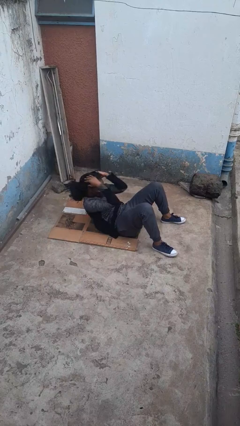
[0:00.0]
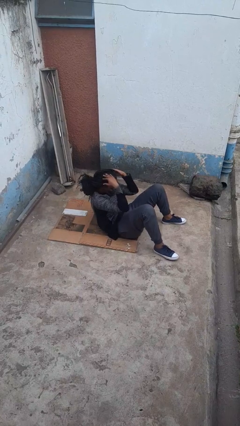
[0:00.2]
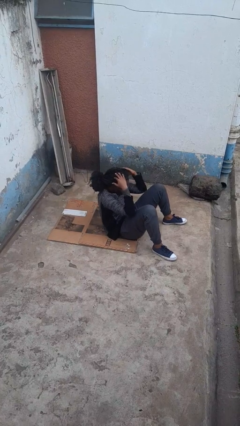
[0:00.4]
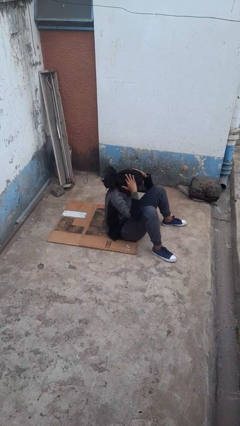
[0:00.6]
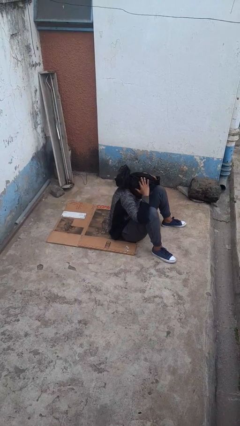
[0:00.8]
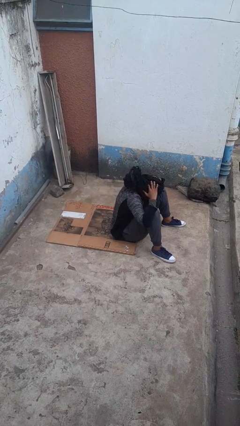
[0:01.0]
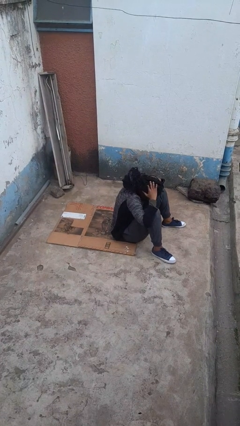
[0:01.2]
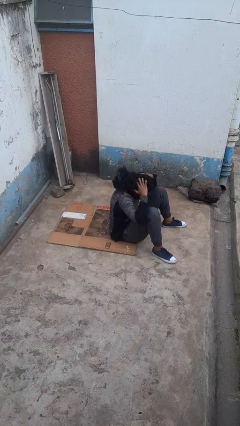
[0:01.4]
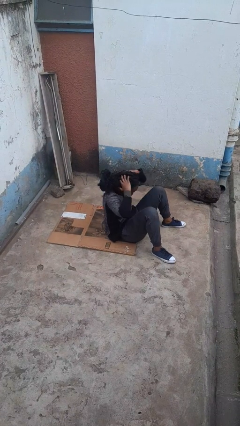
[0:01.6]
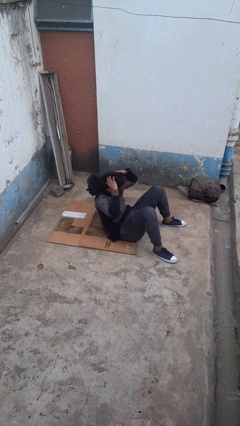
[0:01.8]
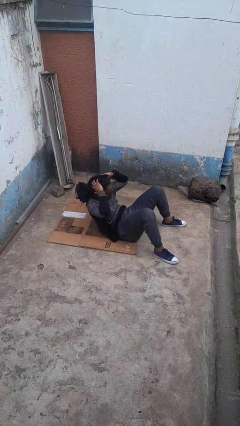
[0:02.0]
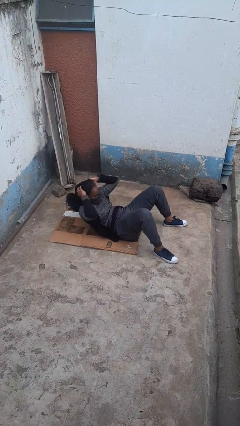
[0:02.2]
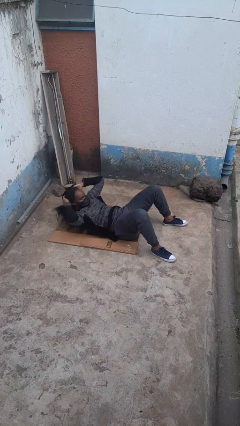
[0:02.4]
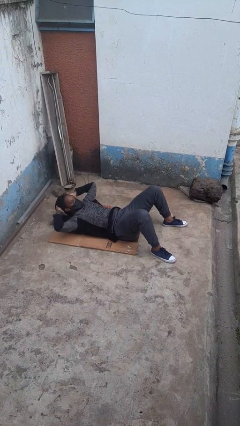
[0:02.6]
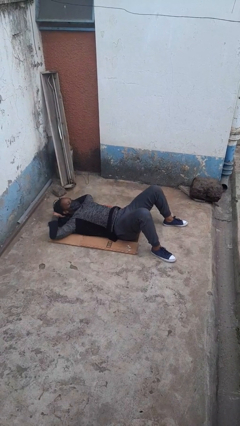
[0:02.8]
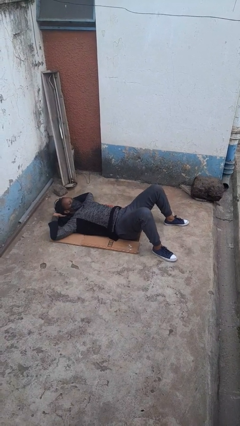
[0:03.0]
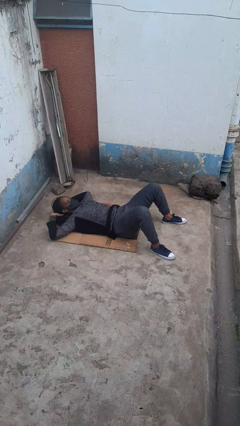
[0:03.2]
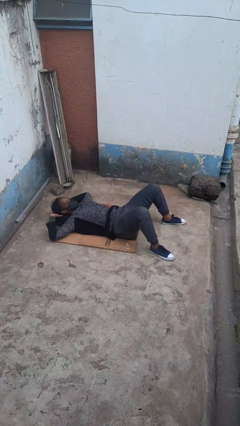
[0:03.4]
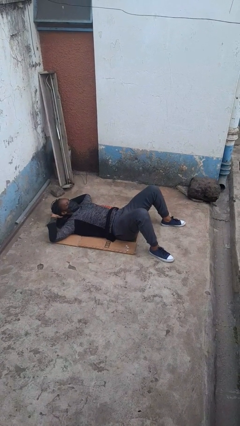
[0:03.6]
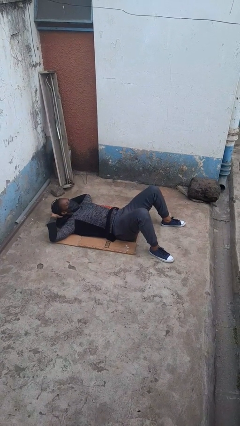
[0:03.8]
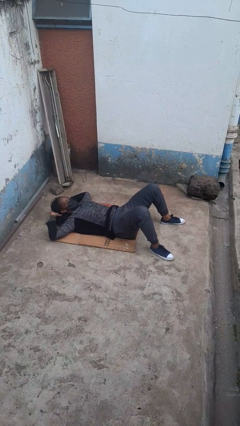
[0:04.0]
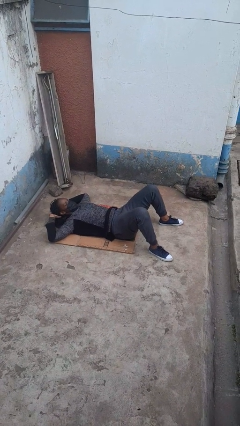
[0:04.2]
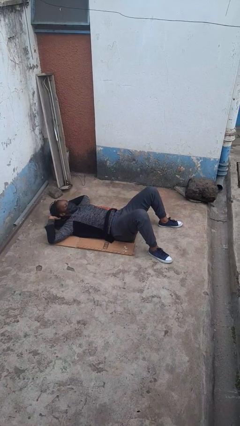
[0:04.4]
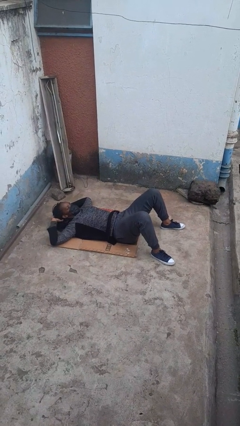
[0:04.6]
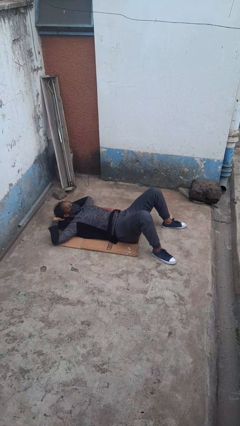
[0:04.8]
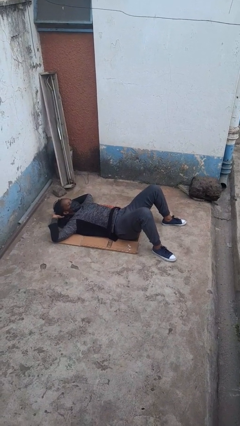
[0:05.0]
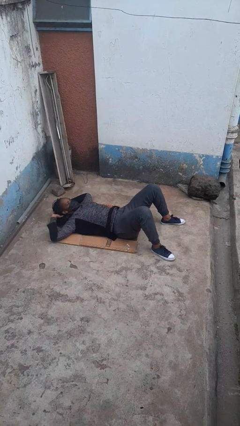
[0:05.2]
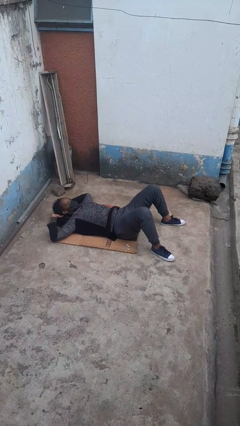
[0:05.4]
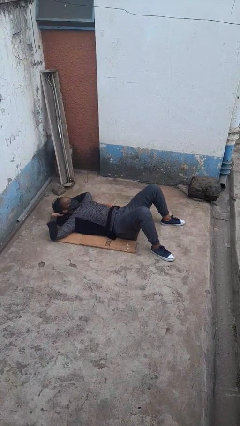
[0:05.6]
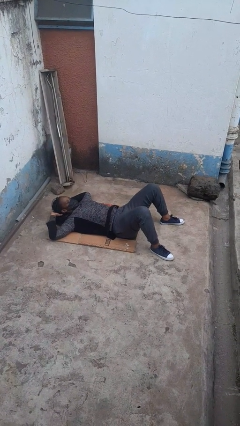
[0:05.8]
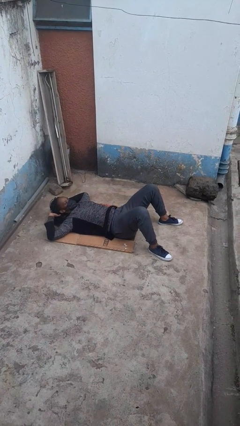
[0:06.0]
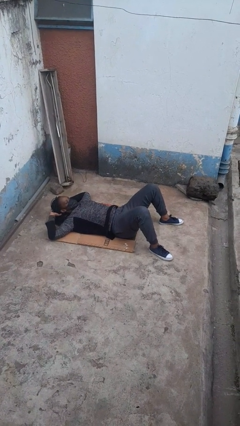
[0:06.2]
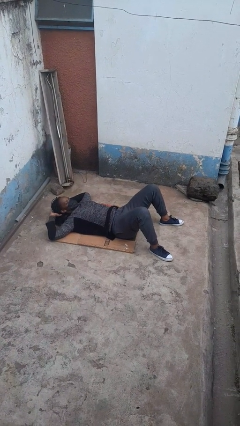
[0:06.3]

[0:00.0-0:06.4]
person exercises with situp

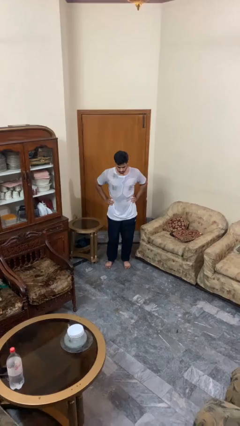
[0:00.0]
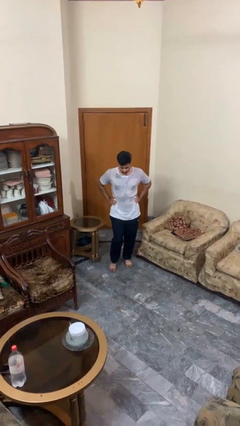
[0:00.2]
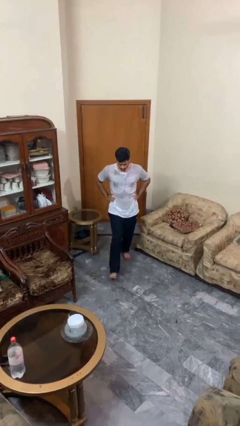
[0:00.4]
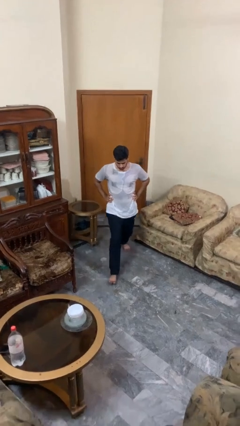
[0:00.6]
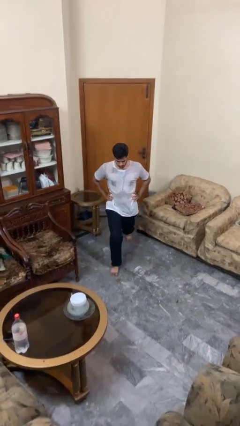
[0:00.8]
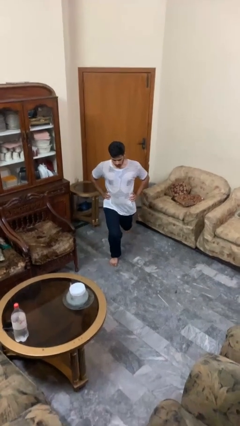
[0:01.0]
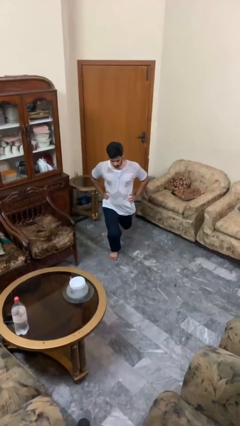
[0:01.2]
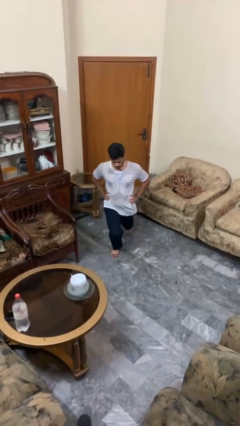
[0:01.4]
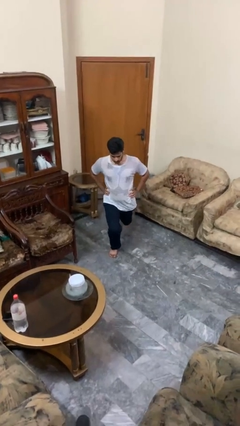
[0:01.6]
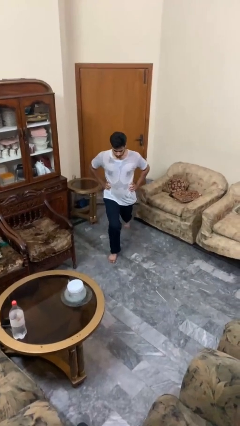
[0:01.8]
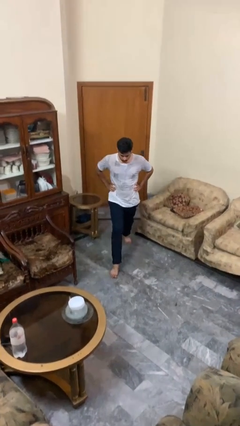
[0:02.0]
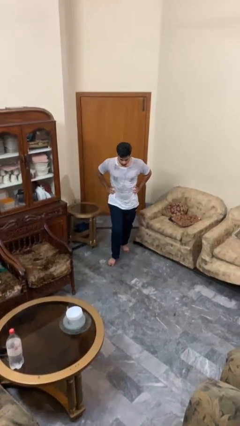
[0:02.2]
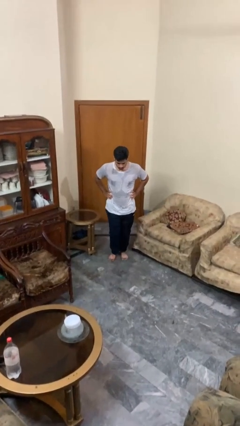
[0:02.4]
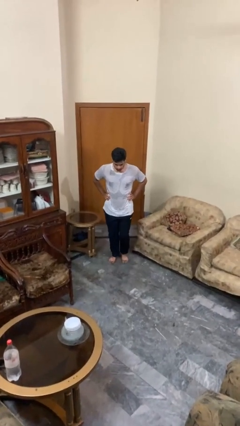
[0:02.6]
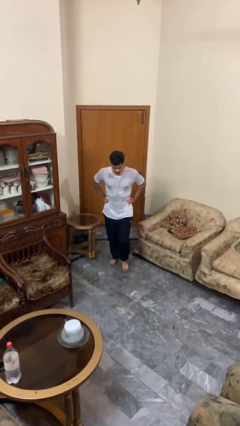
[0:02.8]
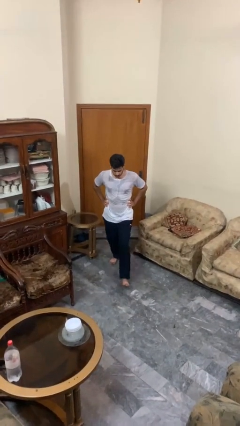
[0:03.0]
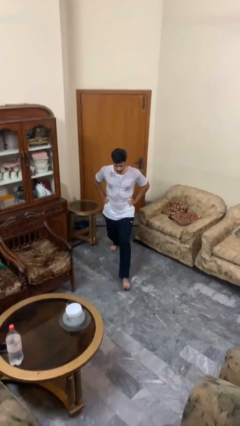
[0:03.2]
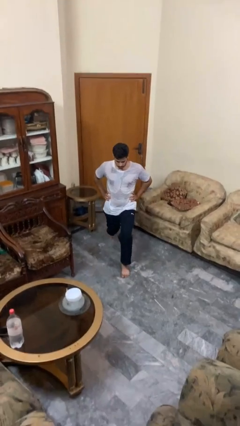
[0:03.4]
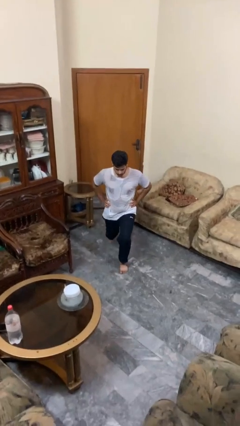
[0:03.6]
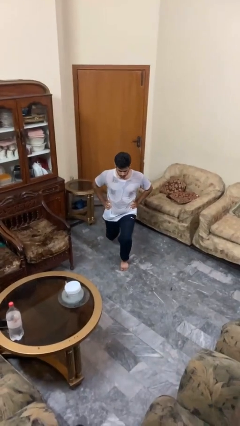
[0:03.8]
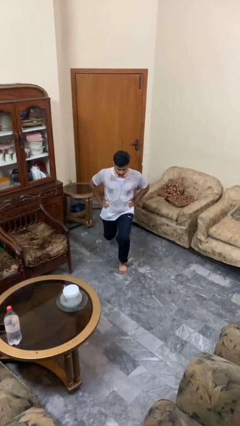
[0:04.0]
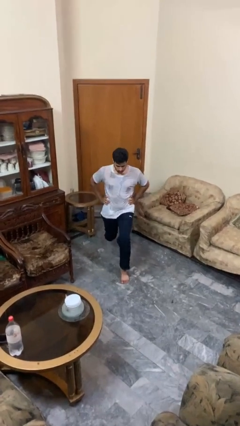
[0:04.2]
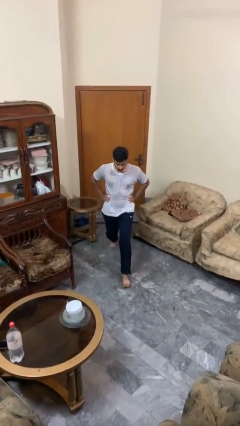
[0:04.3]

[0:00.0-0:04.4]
person exercises with lunges

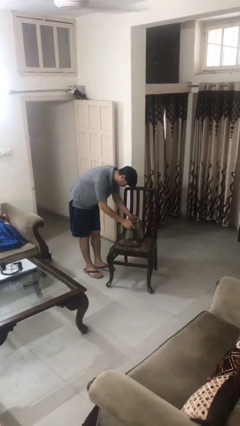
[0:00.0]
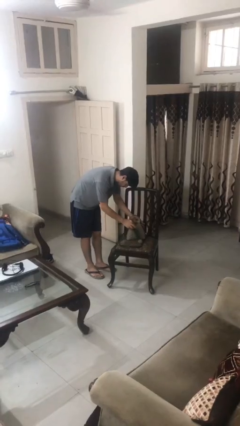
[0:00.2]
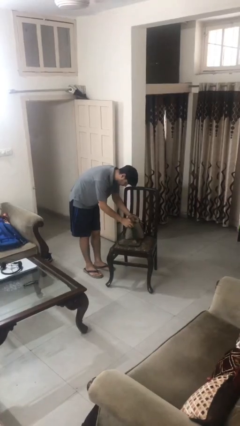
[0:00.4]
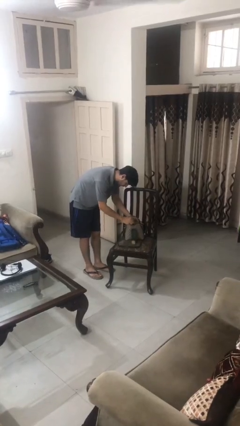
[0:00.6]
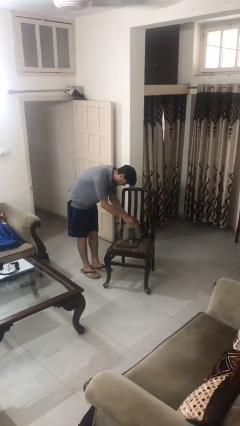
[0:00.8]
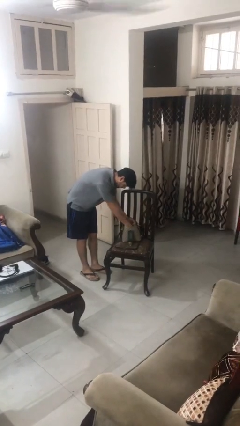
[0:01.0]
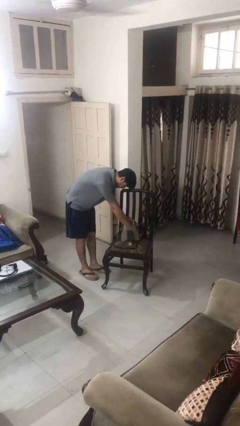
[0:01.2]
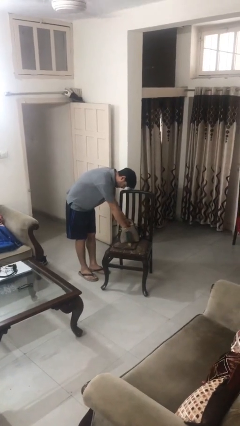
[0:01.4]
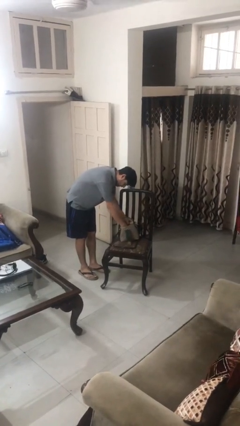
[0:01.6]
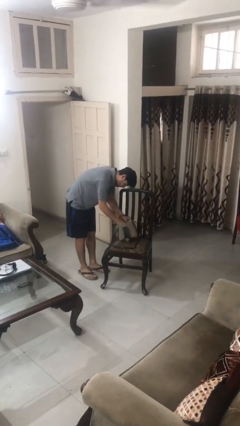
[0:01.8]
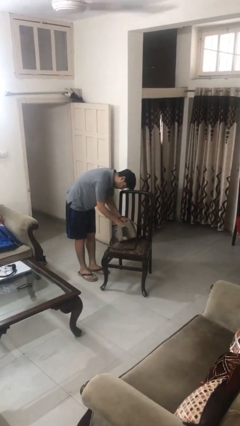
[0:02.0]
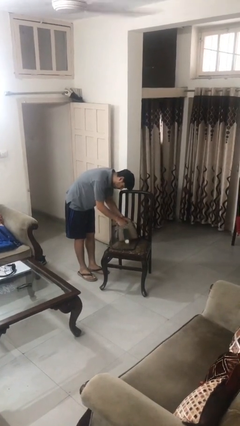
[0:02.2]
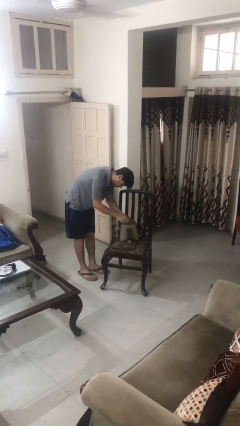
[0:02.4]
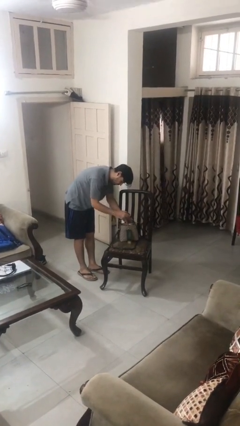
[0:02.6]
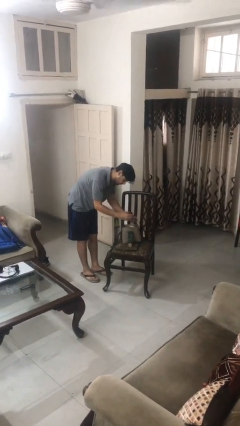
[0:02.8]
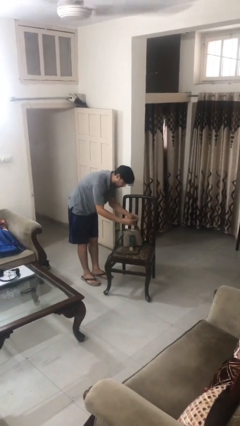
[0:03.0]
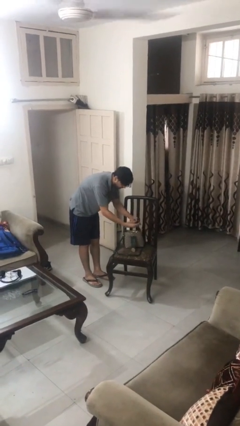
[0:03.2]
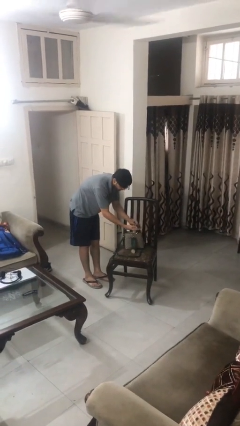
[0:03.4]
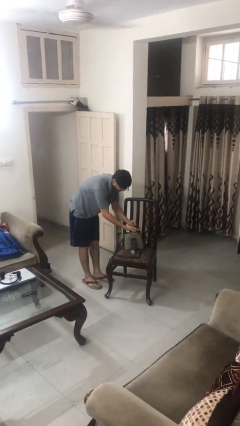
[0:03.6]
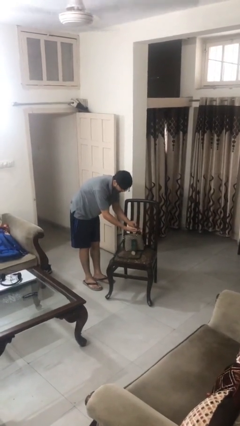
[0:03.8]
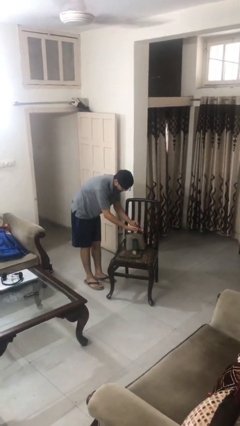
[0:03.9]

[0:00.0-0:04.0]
person takes object from purse

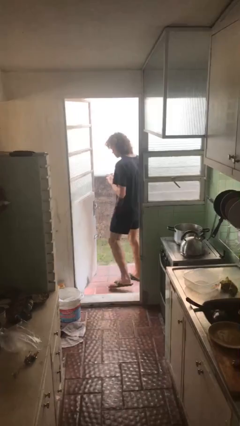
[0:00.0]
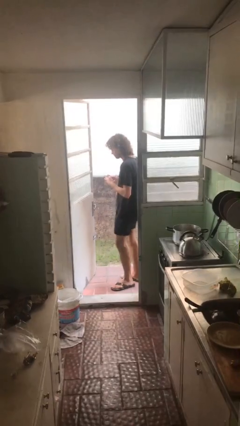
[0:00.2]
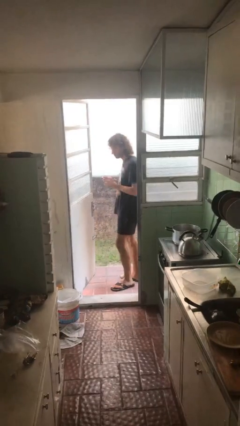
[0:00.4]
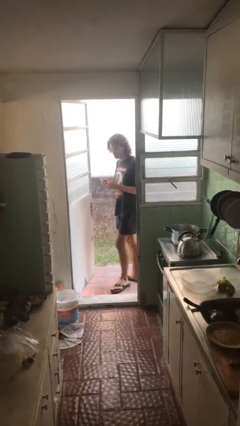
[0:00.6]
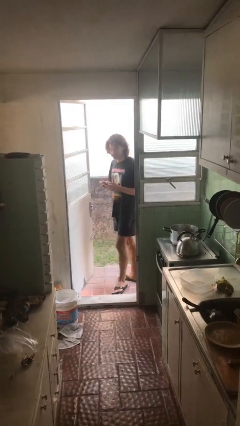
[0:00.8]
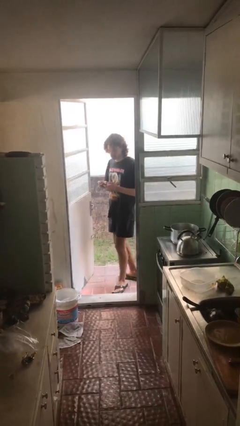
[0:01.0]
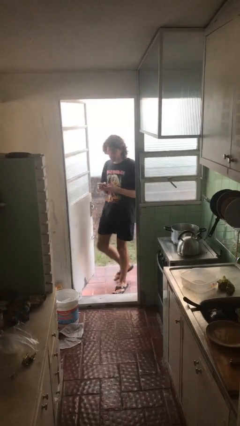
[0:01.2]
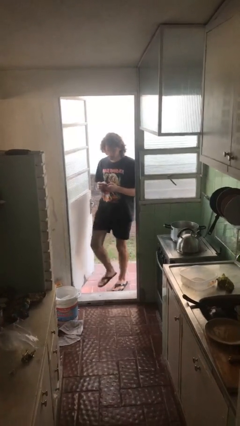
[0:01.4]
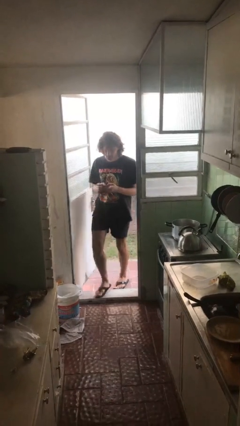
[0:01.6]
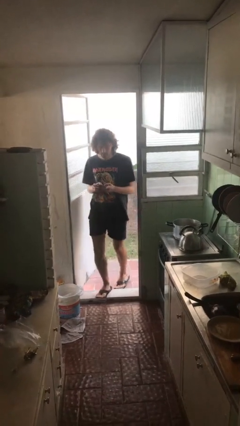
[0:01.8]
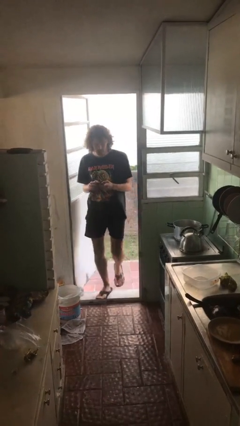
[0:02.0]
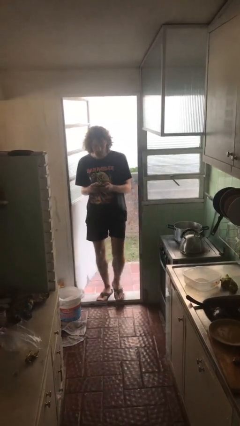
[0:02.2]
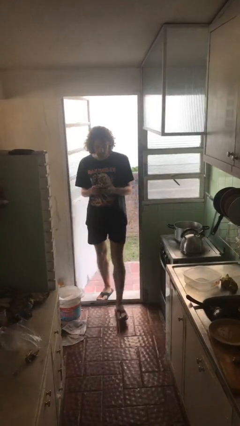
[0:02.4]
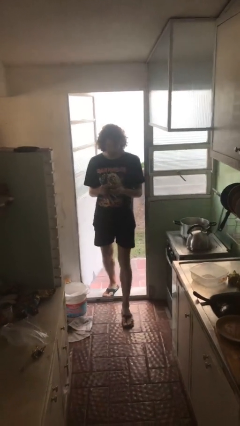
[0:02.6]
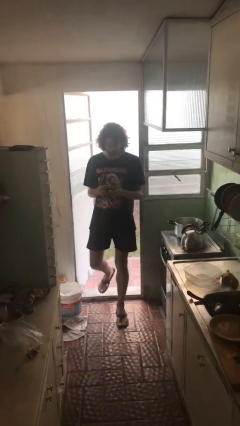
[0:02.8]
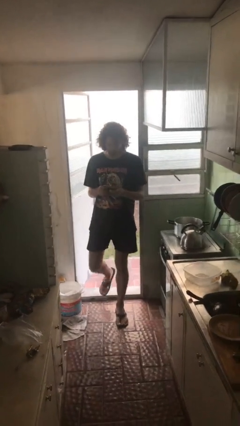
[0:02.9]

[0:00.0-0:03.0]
person enters scene through structure
